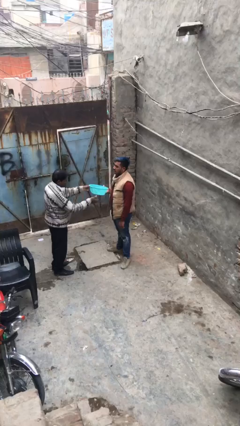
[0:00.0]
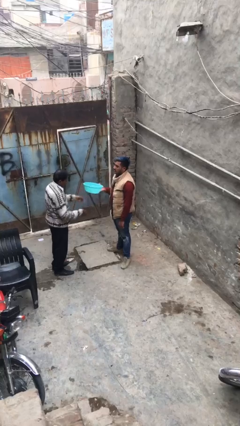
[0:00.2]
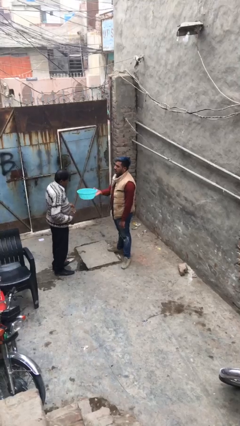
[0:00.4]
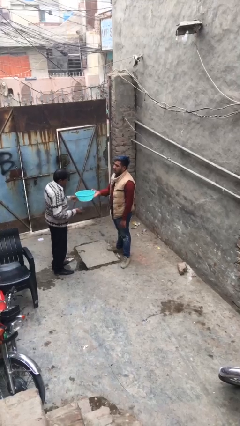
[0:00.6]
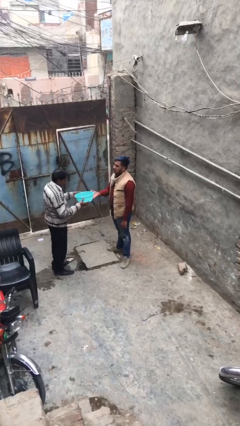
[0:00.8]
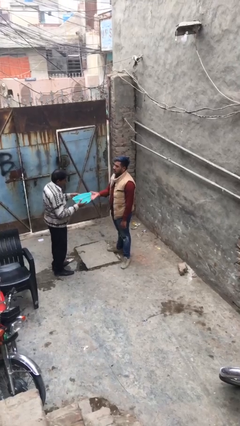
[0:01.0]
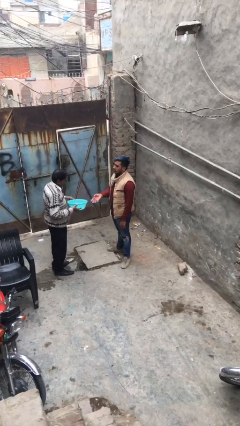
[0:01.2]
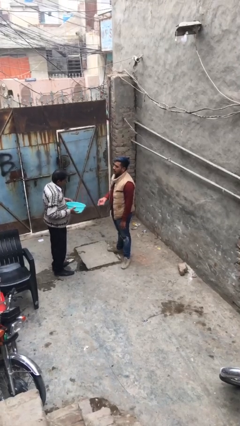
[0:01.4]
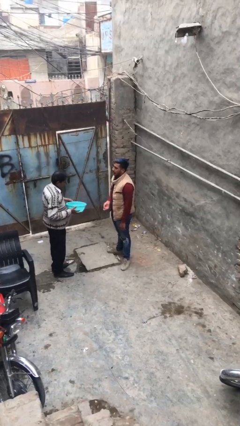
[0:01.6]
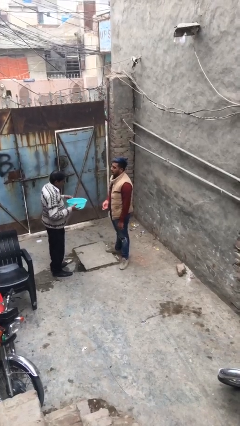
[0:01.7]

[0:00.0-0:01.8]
person transfers object to person

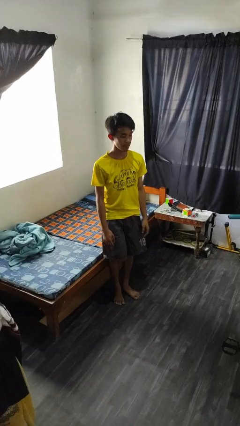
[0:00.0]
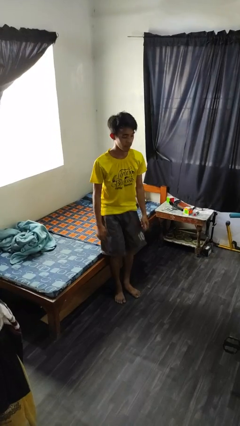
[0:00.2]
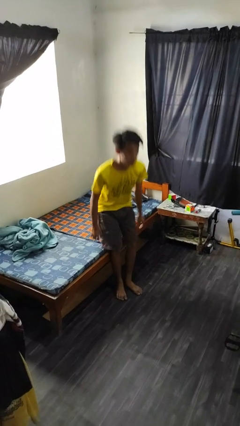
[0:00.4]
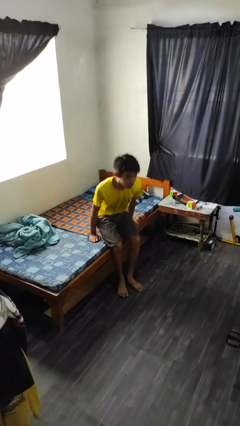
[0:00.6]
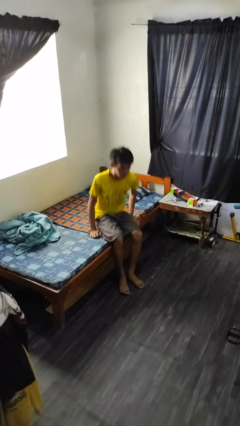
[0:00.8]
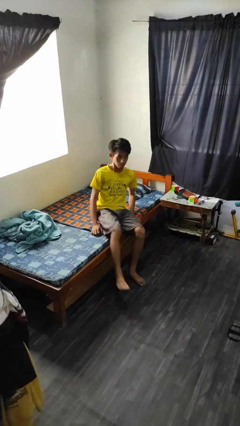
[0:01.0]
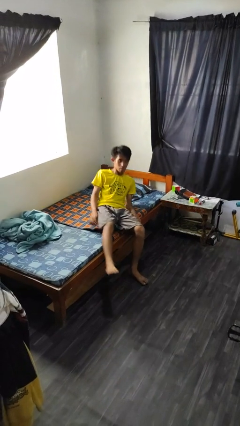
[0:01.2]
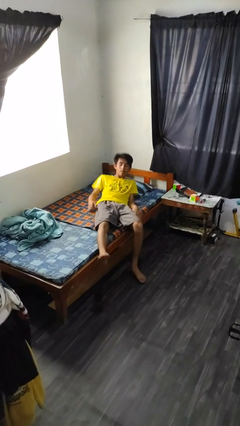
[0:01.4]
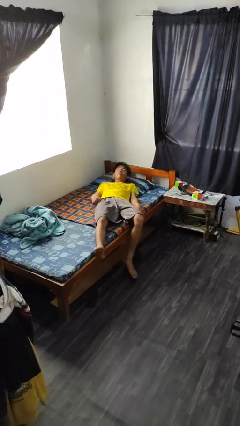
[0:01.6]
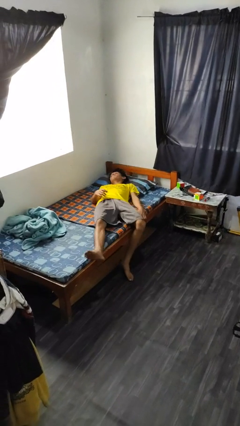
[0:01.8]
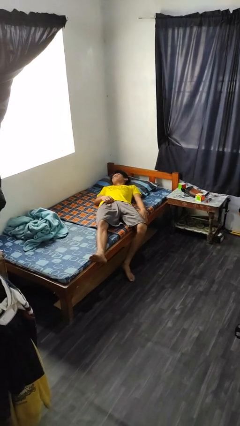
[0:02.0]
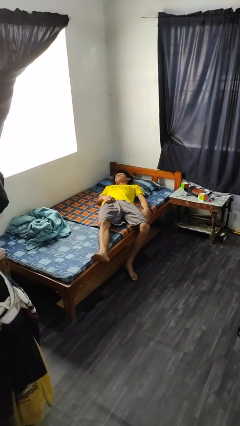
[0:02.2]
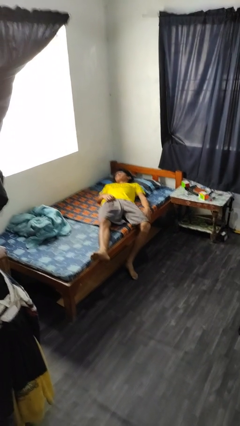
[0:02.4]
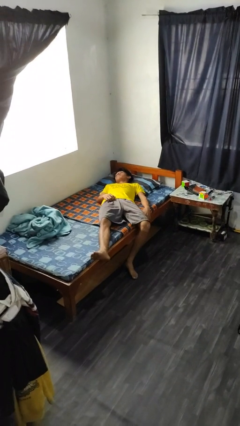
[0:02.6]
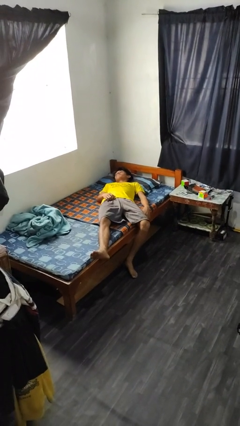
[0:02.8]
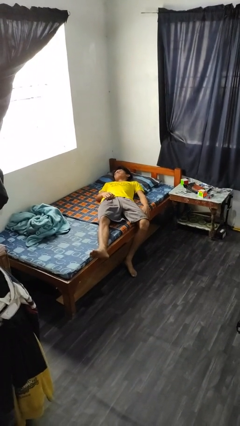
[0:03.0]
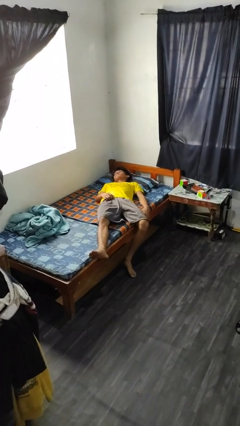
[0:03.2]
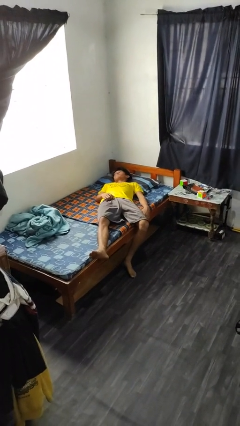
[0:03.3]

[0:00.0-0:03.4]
person lies down on bed

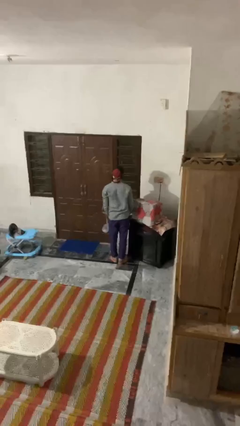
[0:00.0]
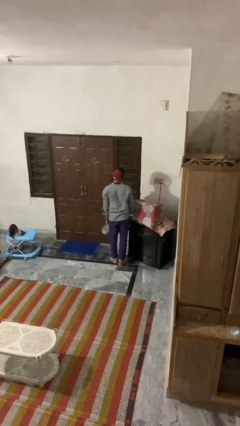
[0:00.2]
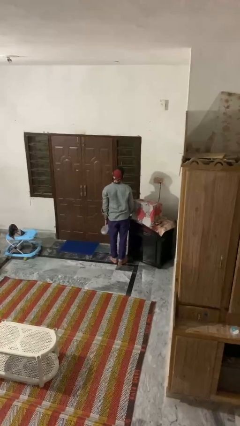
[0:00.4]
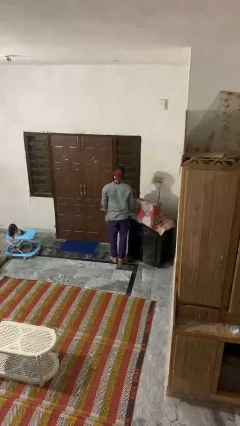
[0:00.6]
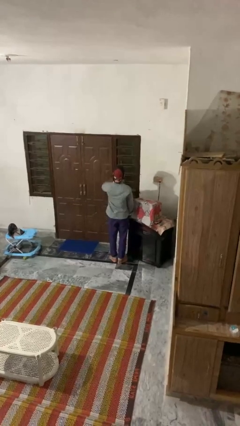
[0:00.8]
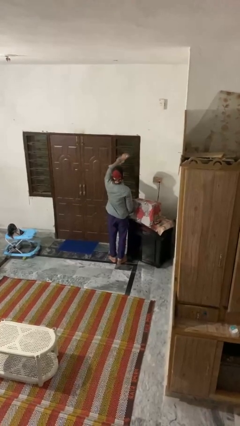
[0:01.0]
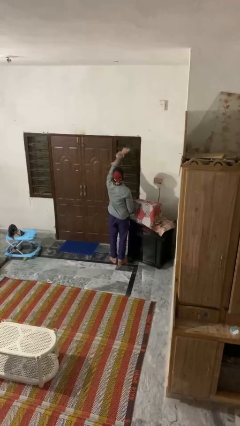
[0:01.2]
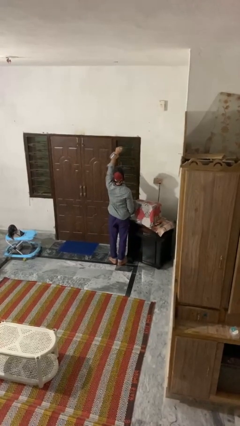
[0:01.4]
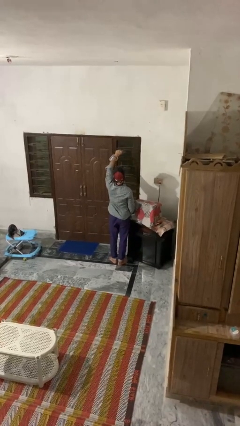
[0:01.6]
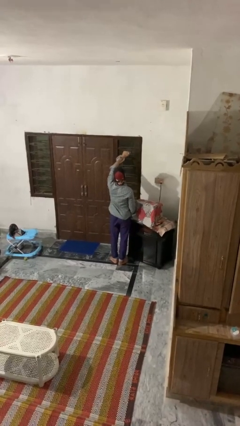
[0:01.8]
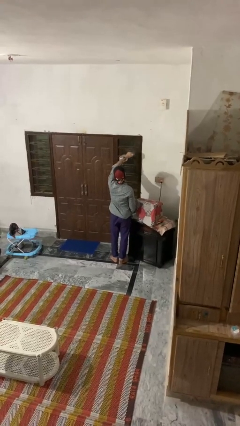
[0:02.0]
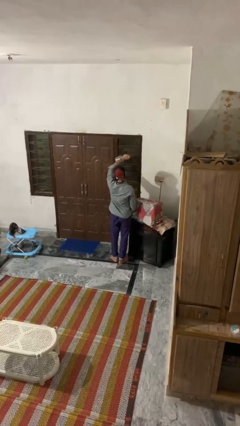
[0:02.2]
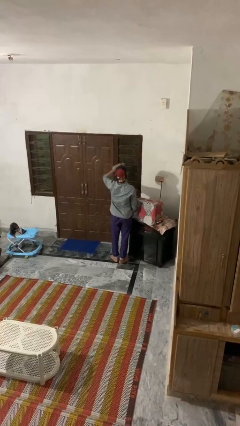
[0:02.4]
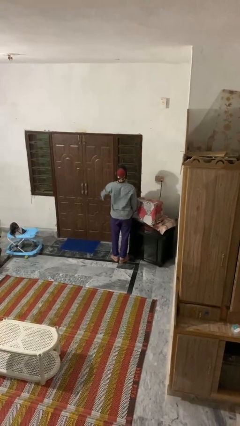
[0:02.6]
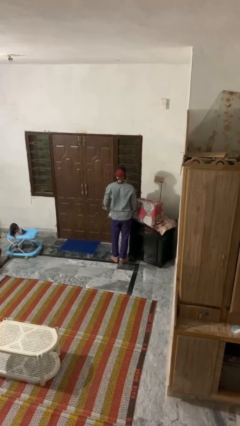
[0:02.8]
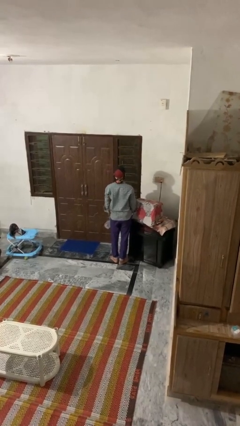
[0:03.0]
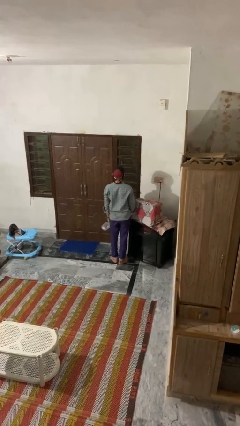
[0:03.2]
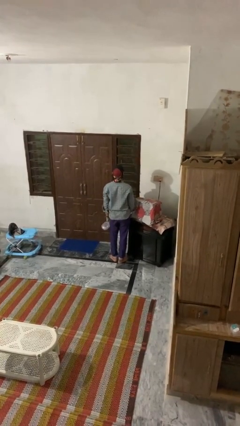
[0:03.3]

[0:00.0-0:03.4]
person sprays from bottle

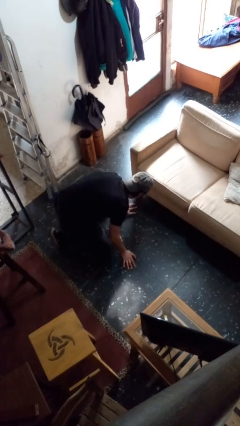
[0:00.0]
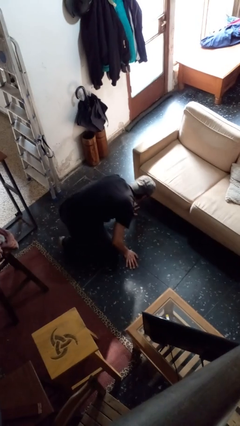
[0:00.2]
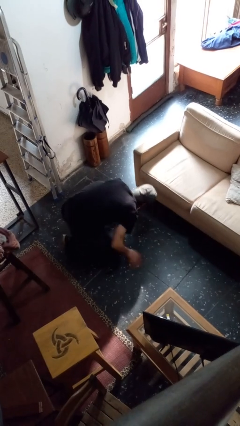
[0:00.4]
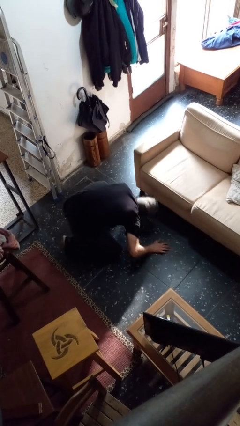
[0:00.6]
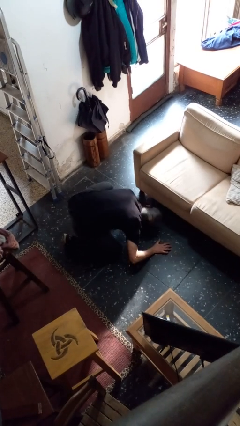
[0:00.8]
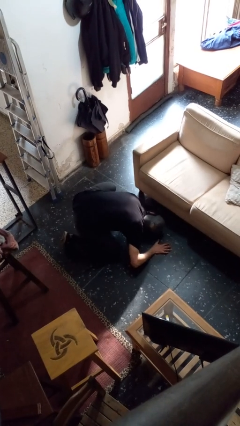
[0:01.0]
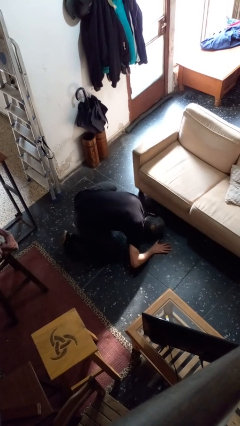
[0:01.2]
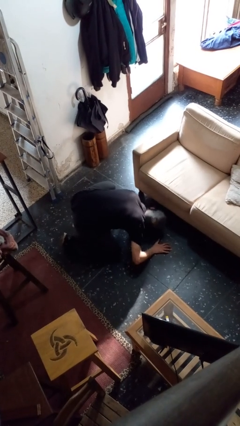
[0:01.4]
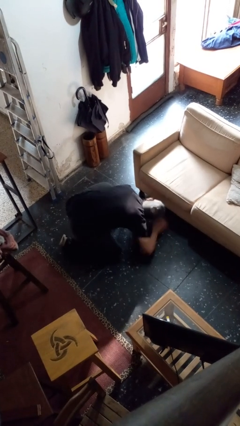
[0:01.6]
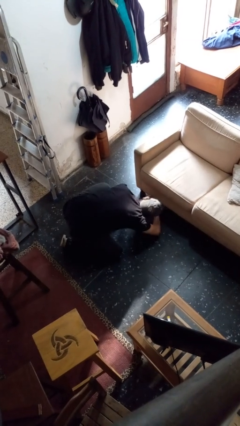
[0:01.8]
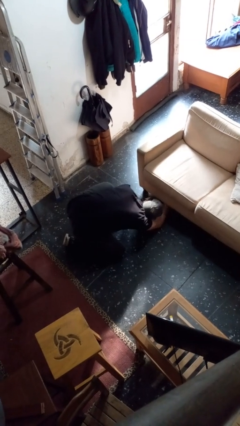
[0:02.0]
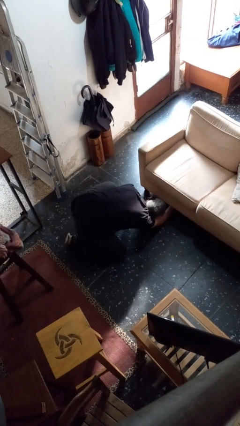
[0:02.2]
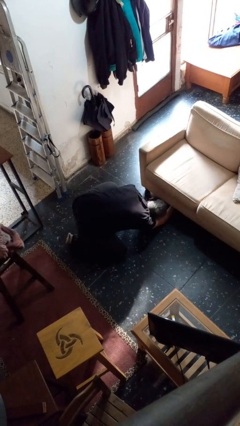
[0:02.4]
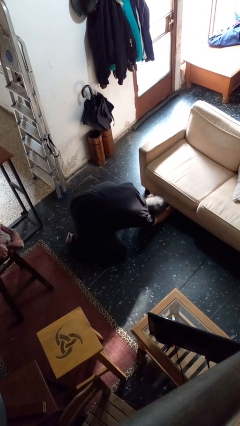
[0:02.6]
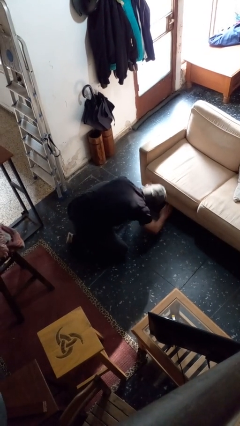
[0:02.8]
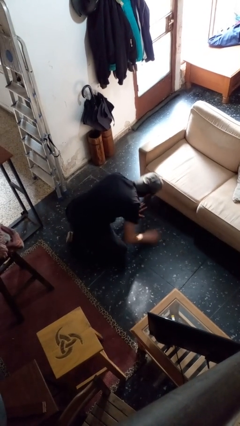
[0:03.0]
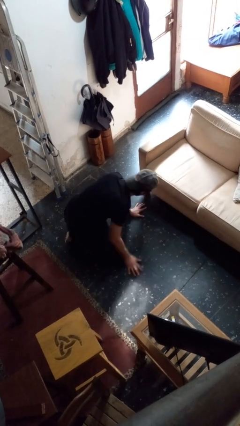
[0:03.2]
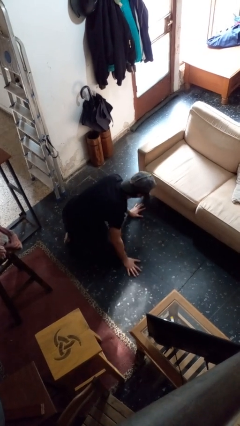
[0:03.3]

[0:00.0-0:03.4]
person searches under couch

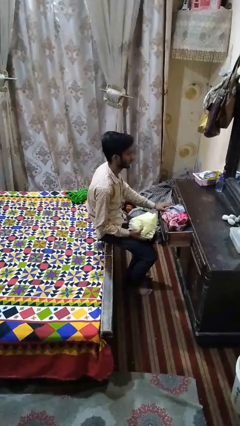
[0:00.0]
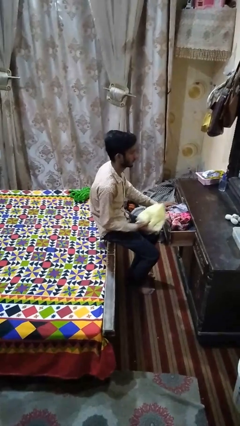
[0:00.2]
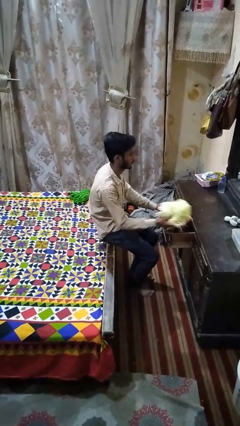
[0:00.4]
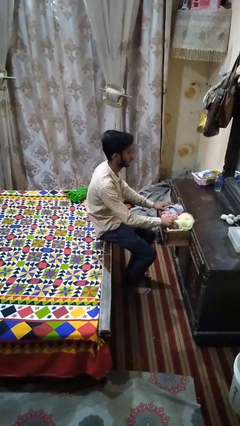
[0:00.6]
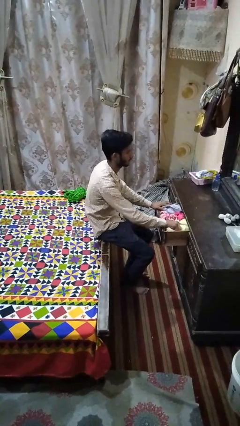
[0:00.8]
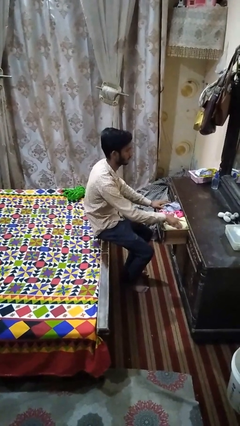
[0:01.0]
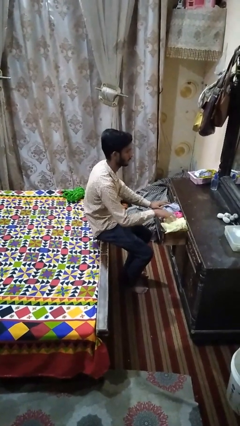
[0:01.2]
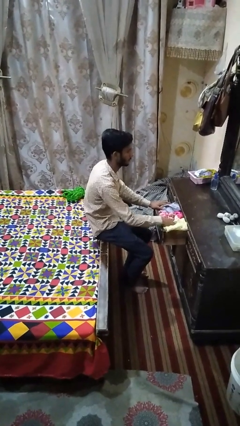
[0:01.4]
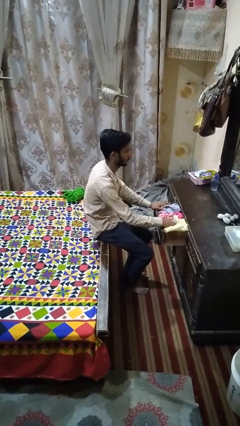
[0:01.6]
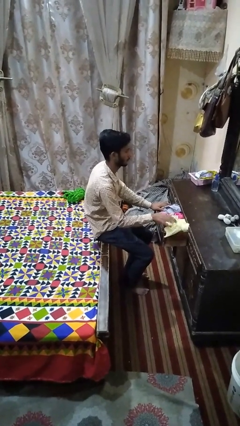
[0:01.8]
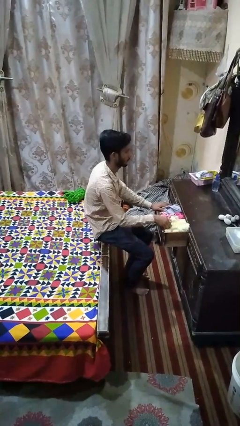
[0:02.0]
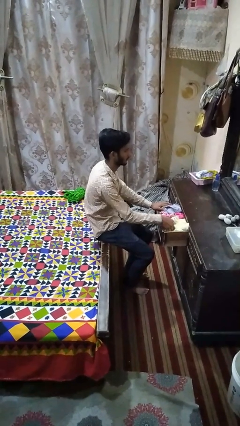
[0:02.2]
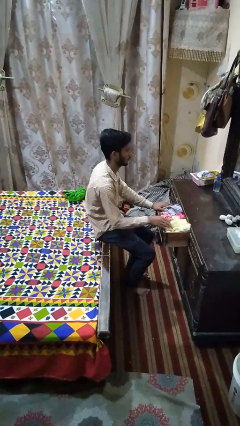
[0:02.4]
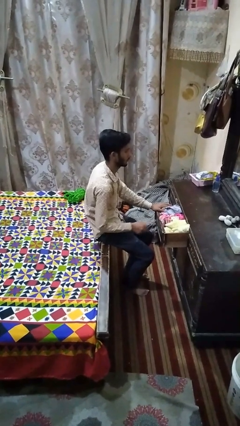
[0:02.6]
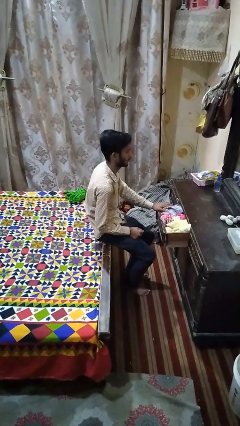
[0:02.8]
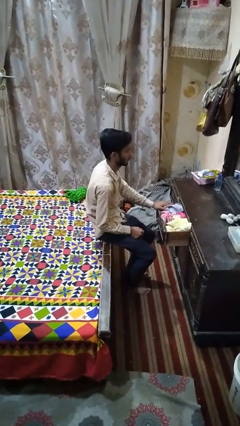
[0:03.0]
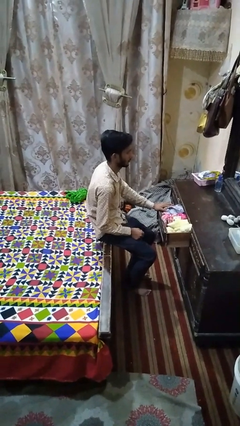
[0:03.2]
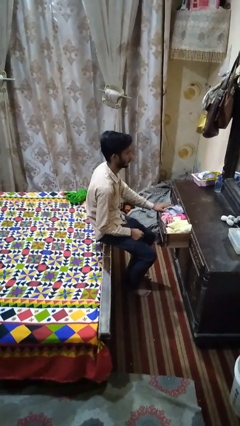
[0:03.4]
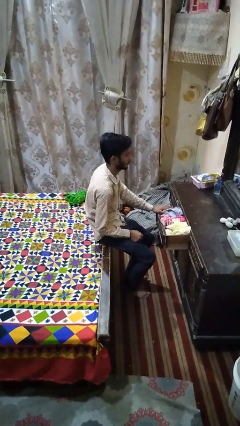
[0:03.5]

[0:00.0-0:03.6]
person puts clothes into dresser

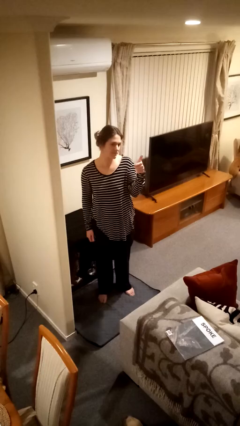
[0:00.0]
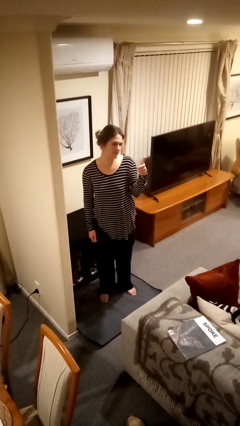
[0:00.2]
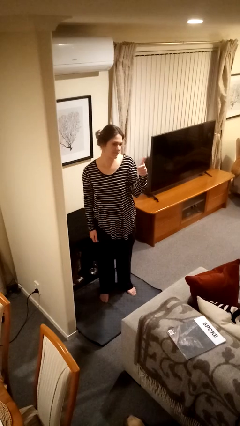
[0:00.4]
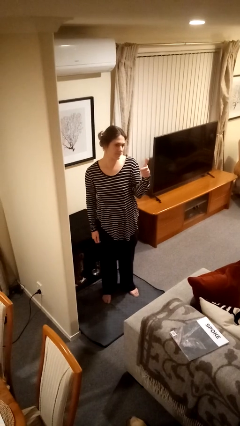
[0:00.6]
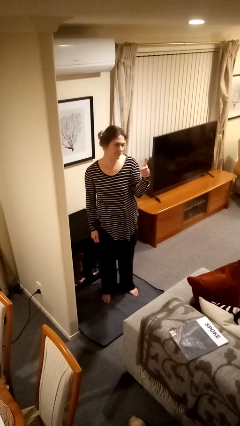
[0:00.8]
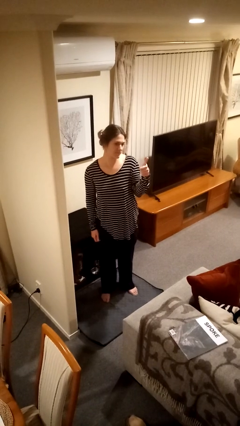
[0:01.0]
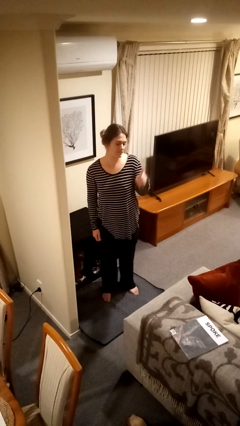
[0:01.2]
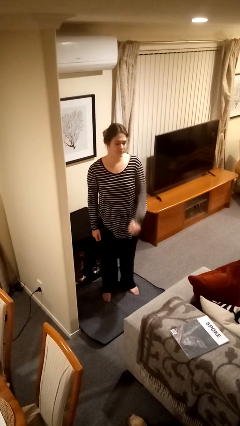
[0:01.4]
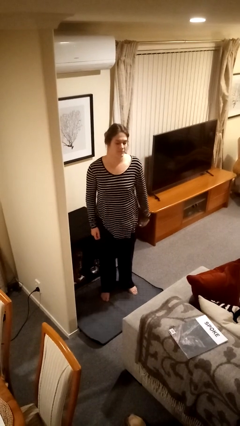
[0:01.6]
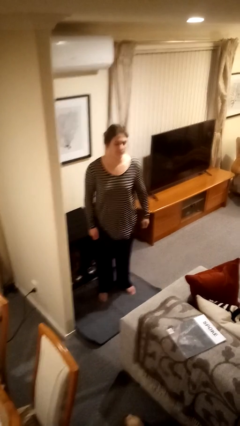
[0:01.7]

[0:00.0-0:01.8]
person gestures thumbs up
